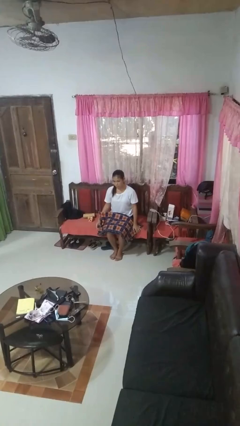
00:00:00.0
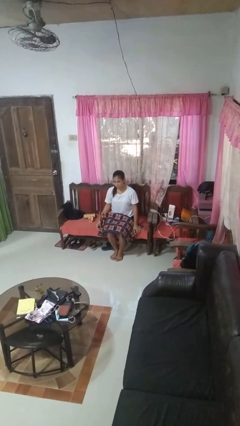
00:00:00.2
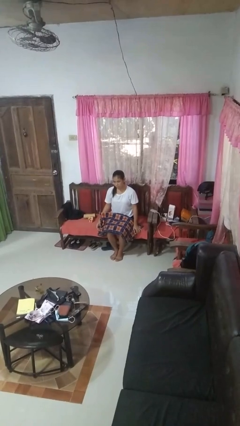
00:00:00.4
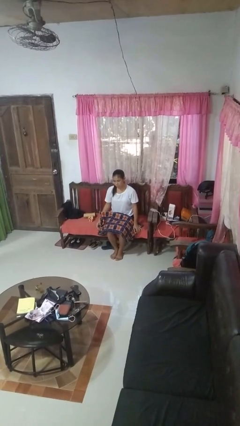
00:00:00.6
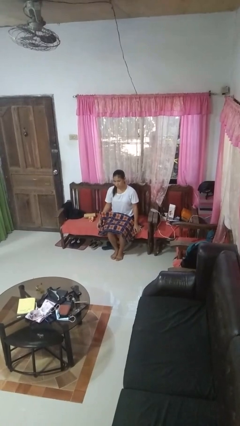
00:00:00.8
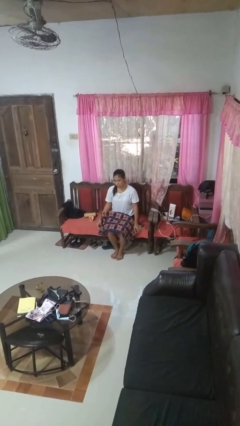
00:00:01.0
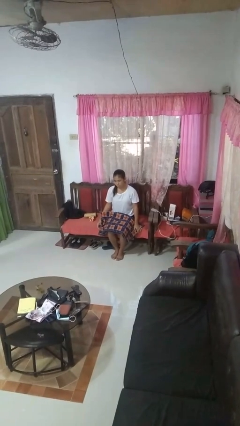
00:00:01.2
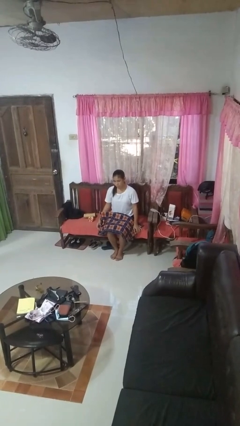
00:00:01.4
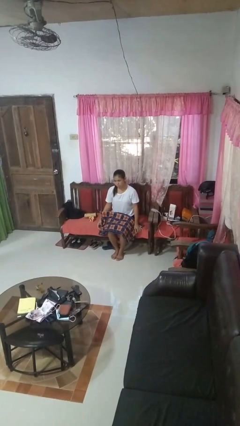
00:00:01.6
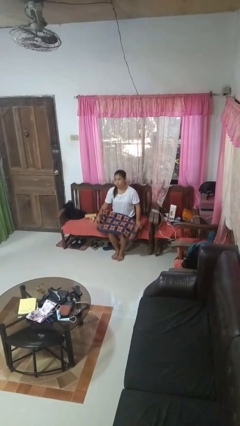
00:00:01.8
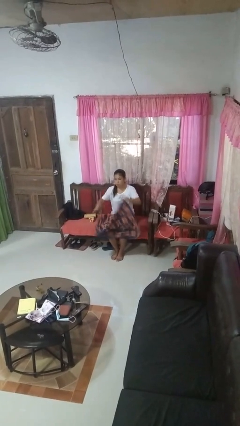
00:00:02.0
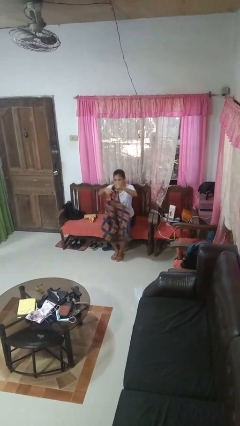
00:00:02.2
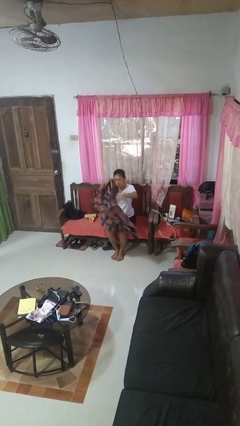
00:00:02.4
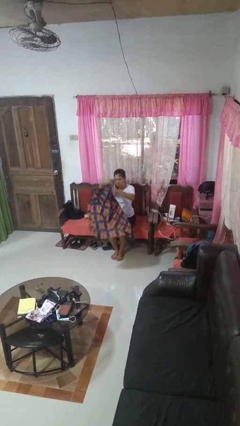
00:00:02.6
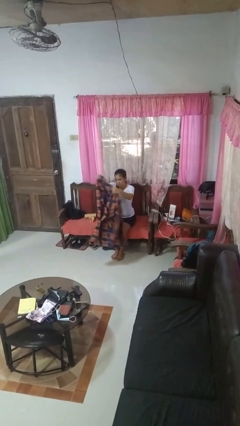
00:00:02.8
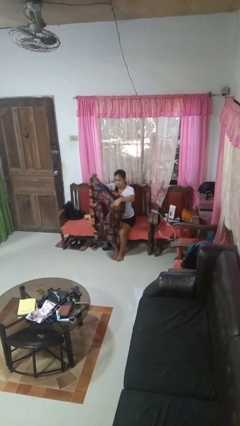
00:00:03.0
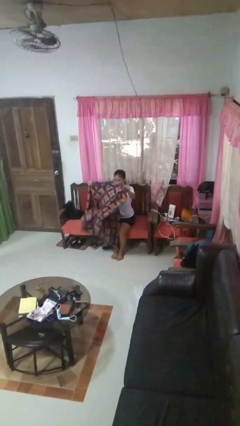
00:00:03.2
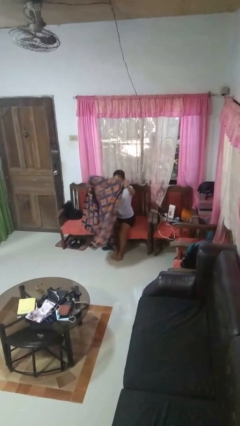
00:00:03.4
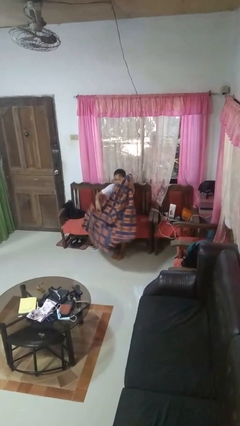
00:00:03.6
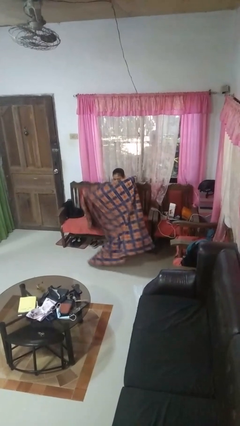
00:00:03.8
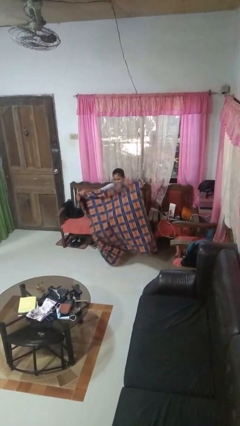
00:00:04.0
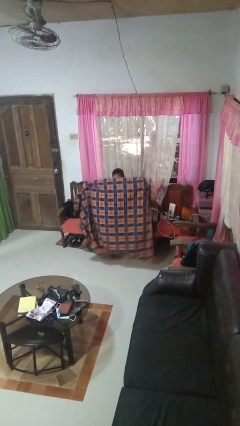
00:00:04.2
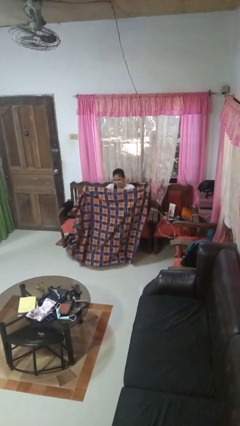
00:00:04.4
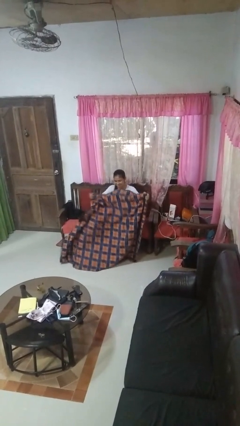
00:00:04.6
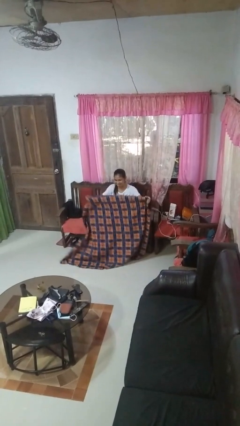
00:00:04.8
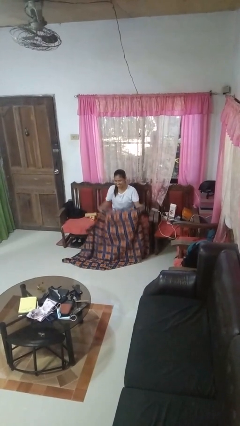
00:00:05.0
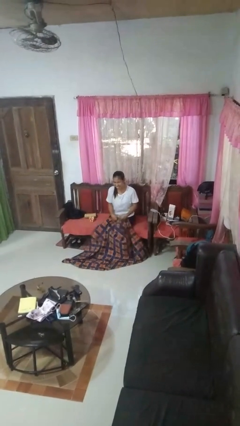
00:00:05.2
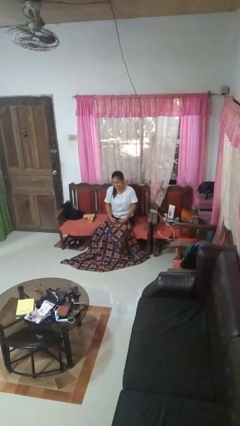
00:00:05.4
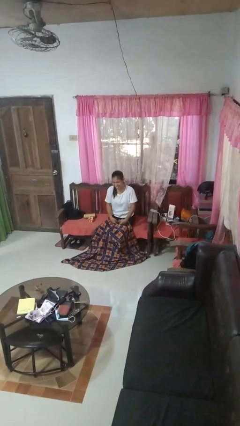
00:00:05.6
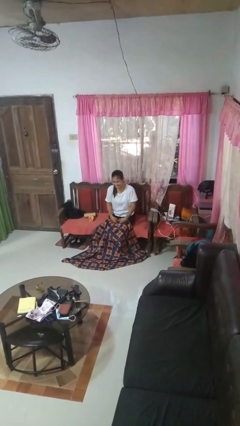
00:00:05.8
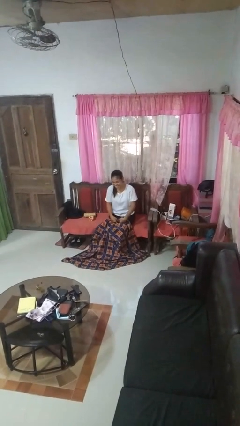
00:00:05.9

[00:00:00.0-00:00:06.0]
person unfolds blanket

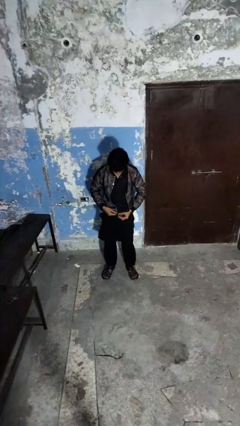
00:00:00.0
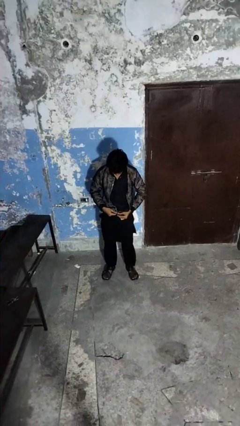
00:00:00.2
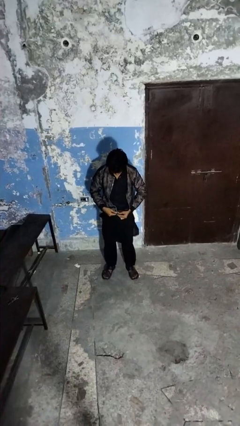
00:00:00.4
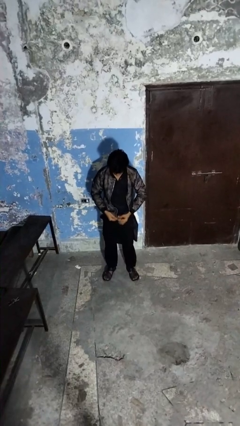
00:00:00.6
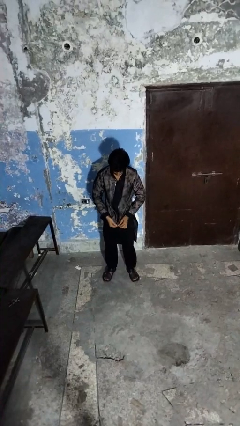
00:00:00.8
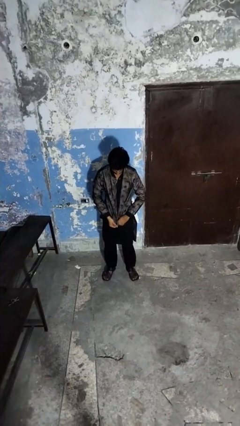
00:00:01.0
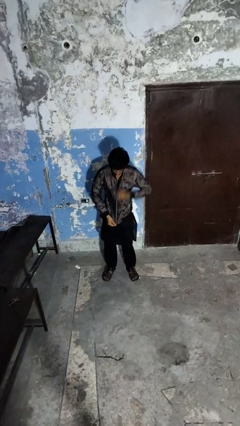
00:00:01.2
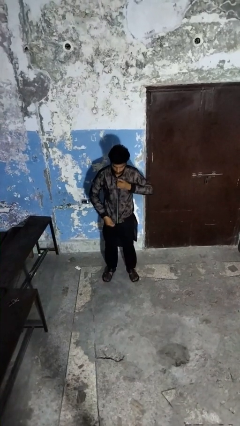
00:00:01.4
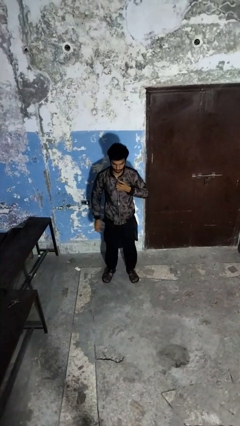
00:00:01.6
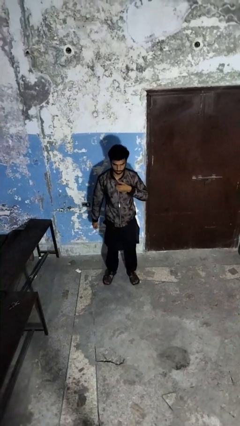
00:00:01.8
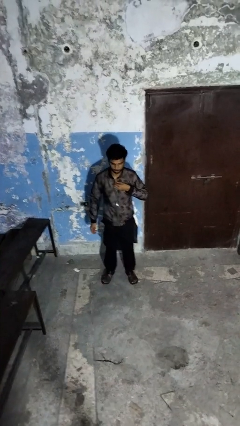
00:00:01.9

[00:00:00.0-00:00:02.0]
person zips up jacket

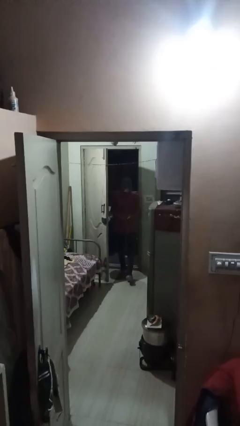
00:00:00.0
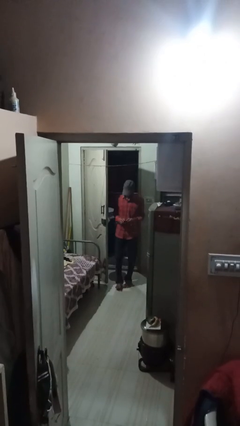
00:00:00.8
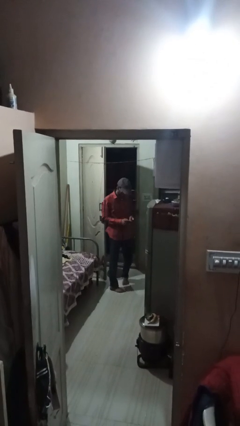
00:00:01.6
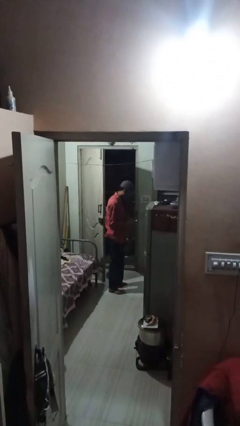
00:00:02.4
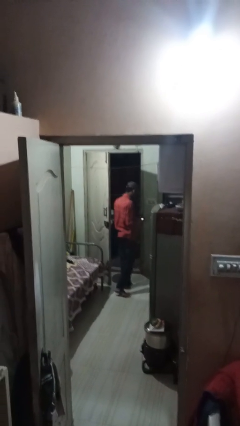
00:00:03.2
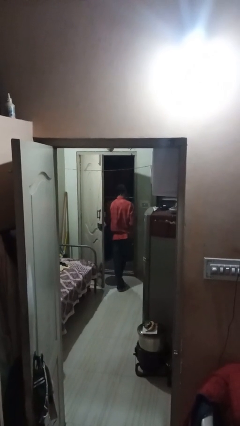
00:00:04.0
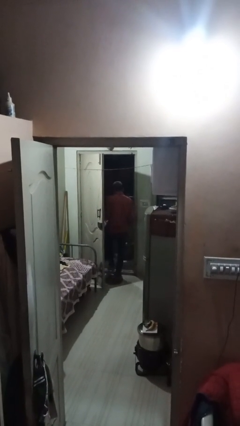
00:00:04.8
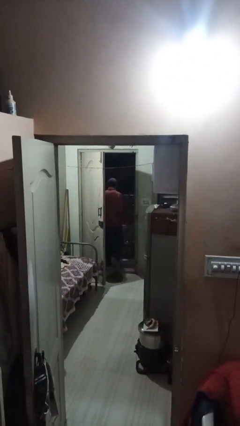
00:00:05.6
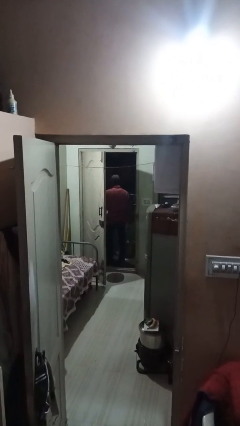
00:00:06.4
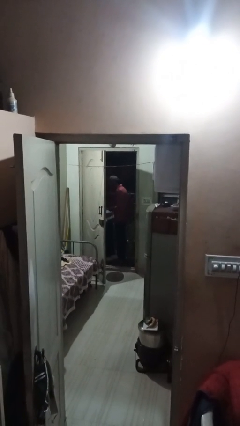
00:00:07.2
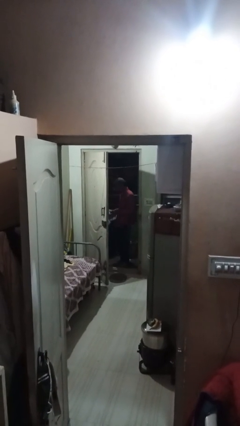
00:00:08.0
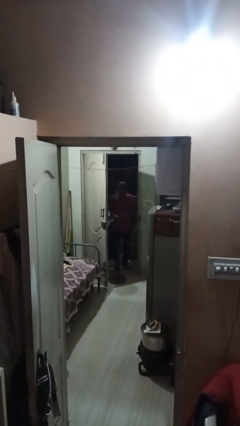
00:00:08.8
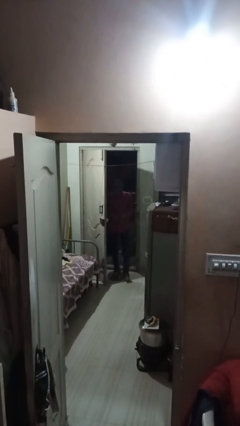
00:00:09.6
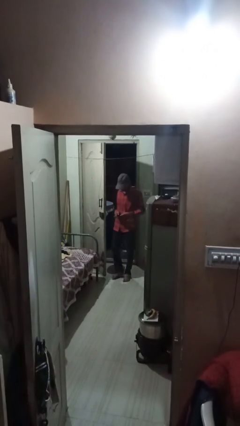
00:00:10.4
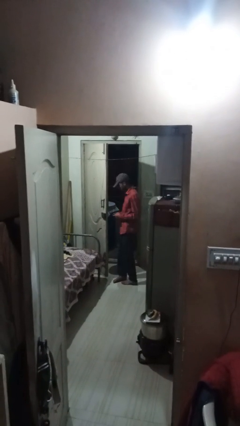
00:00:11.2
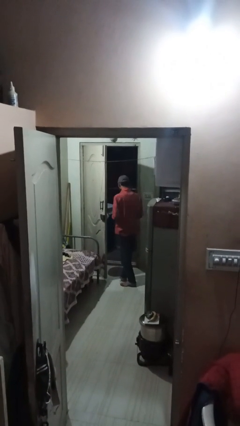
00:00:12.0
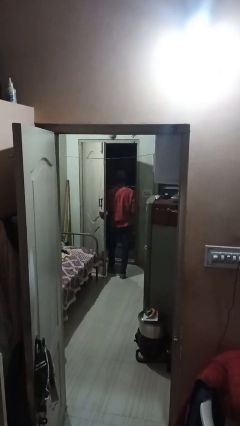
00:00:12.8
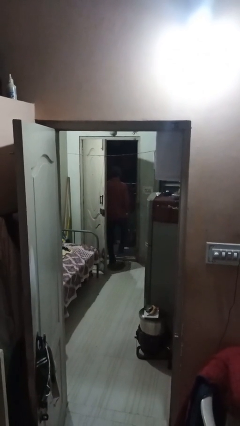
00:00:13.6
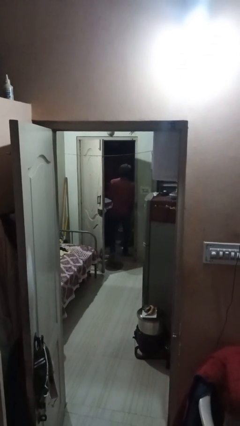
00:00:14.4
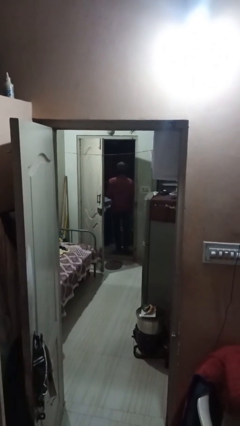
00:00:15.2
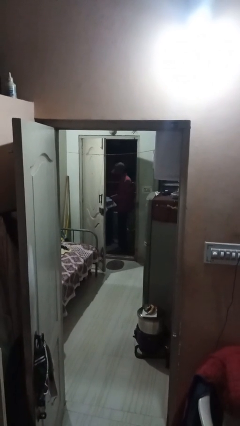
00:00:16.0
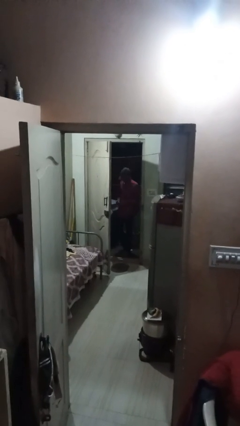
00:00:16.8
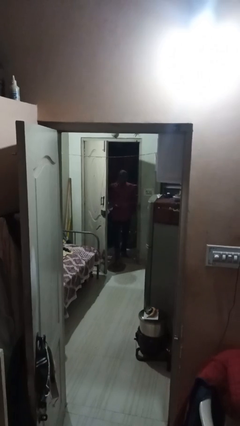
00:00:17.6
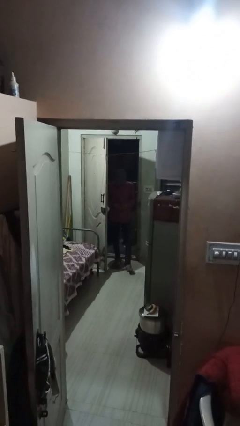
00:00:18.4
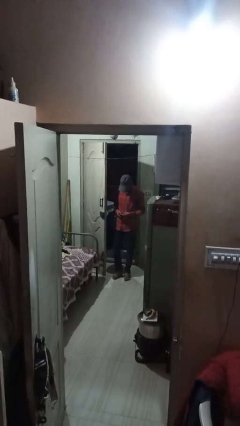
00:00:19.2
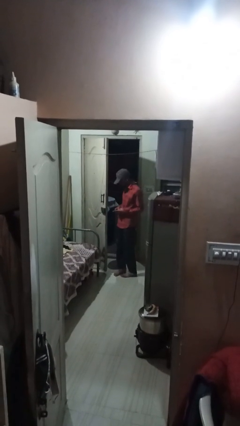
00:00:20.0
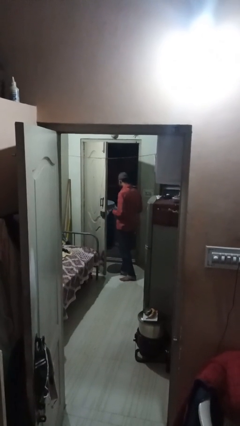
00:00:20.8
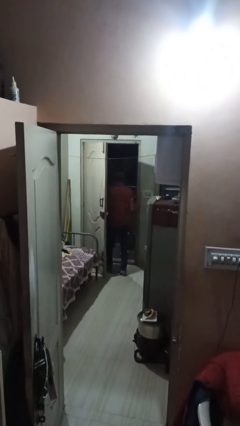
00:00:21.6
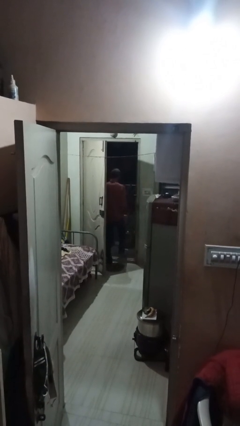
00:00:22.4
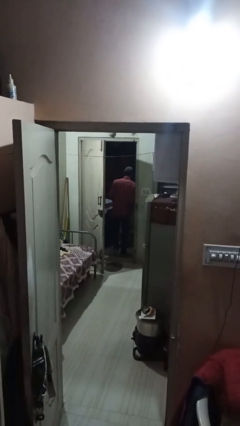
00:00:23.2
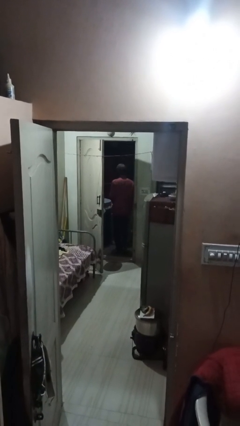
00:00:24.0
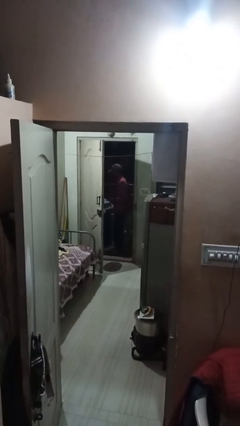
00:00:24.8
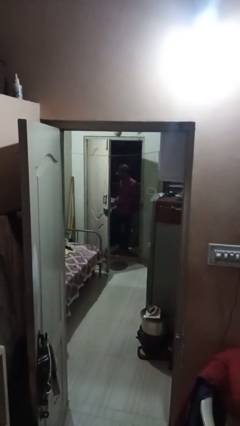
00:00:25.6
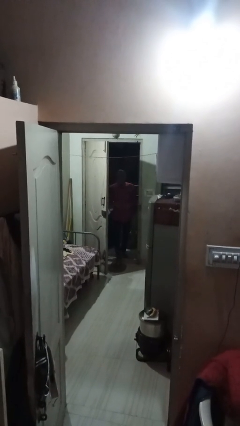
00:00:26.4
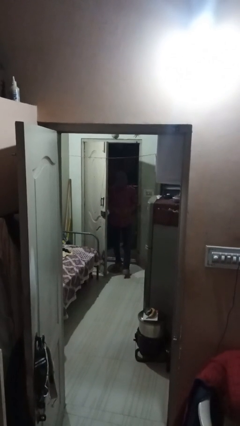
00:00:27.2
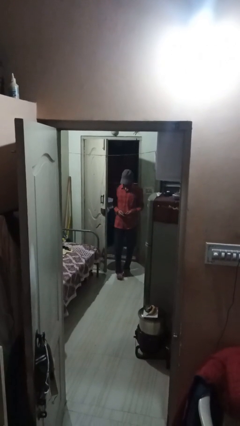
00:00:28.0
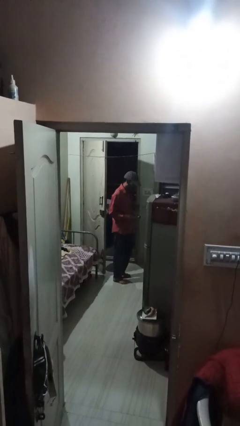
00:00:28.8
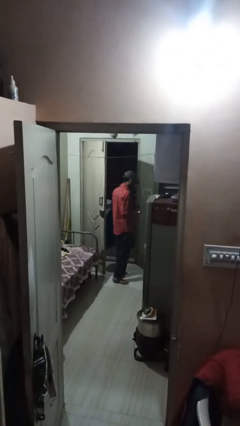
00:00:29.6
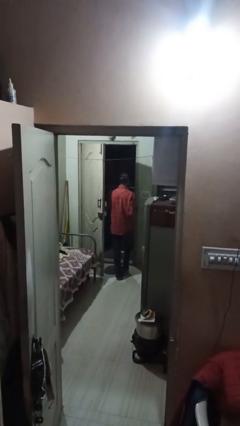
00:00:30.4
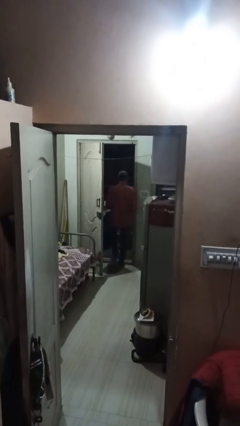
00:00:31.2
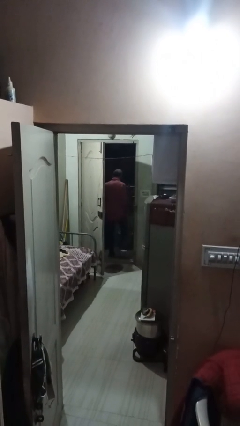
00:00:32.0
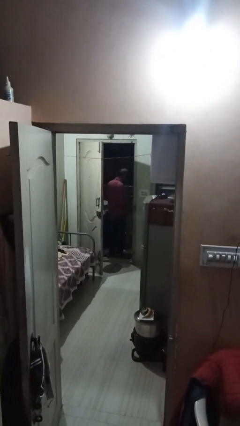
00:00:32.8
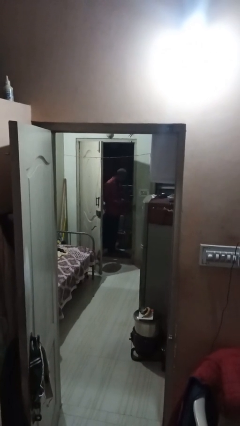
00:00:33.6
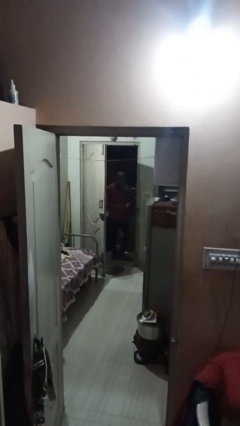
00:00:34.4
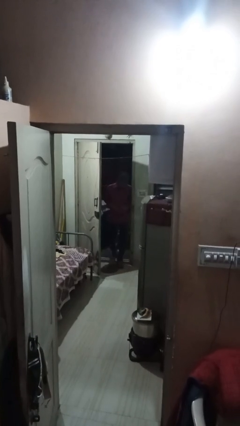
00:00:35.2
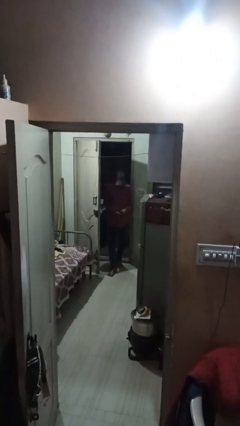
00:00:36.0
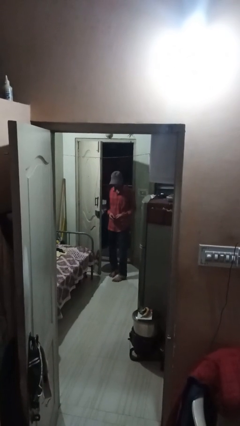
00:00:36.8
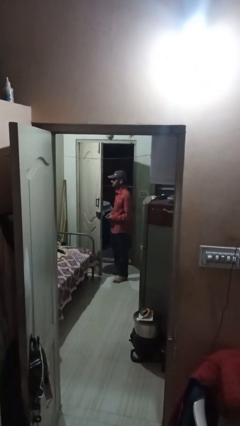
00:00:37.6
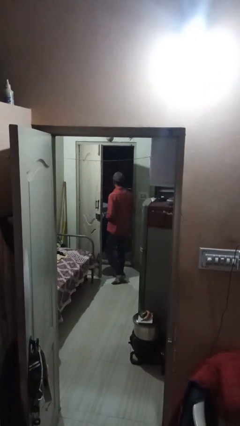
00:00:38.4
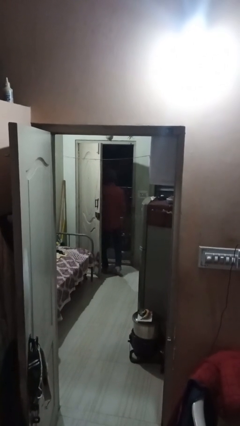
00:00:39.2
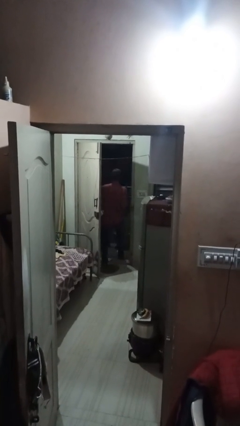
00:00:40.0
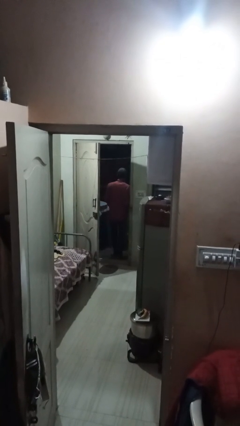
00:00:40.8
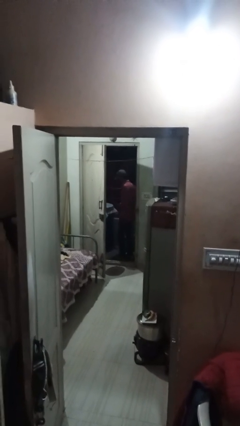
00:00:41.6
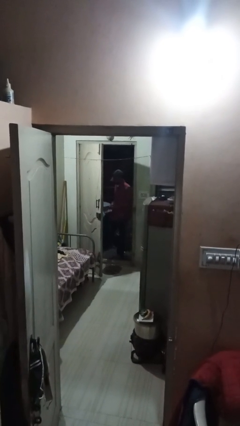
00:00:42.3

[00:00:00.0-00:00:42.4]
person texts on phone
